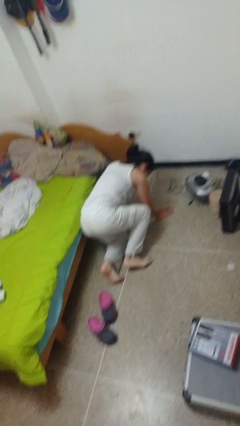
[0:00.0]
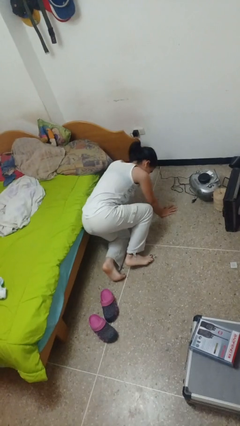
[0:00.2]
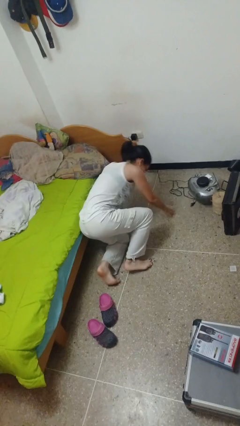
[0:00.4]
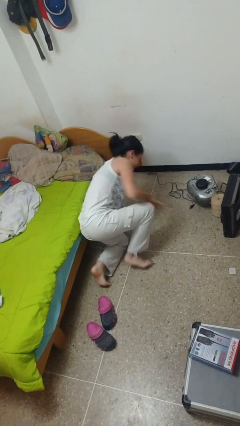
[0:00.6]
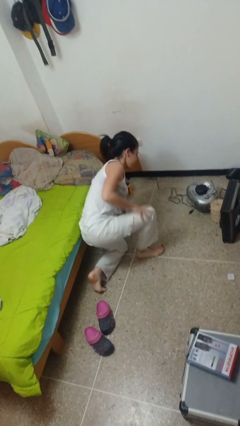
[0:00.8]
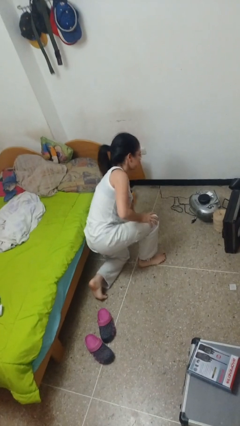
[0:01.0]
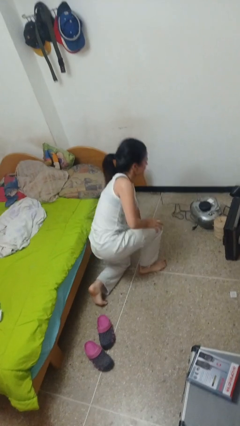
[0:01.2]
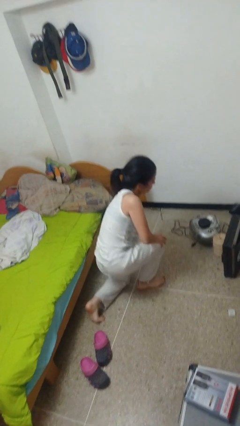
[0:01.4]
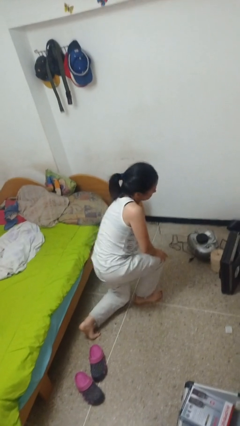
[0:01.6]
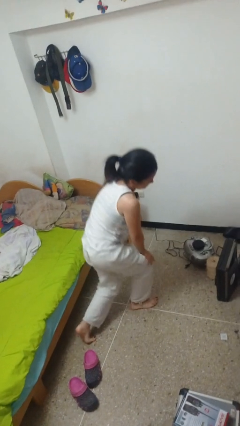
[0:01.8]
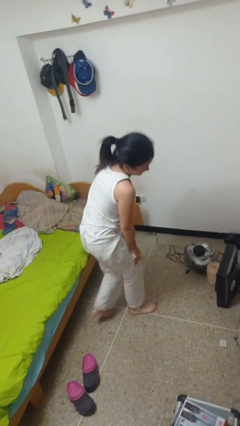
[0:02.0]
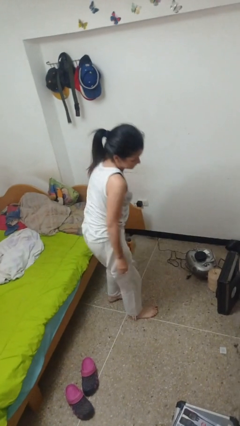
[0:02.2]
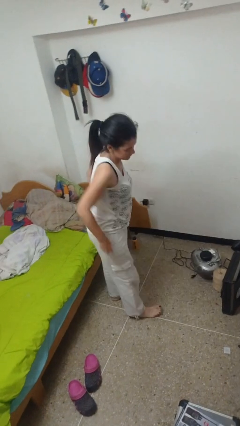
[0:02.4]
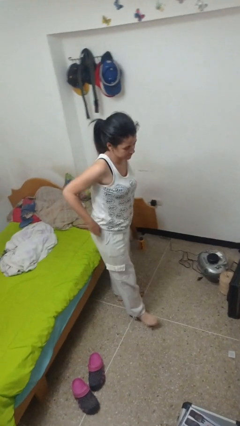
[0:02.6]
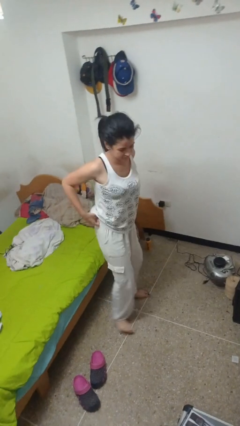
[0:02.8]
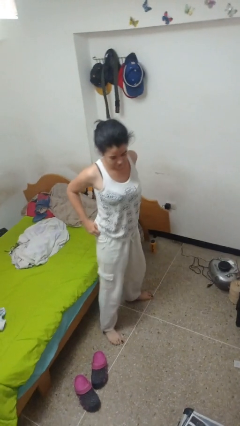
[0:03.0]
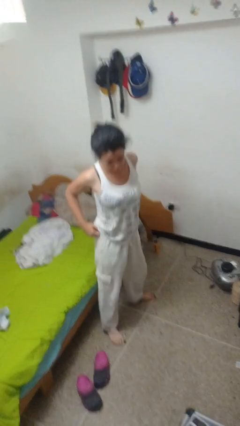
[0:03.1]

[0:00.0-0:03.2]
person stands up from floor

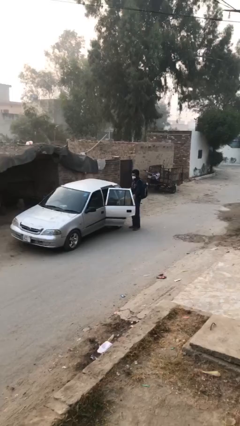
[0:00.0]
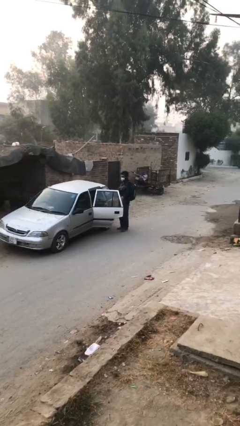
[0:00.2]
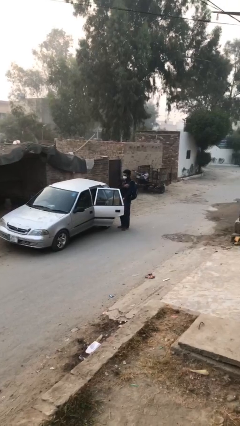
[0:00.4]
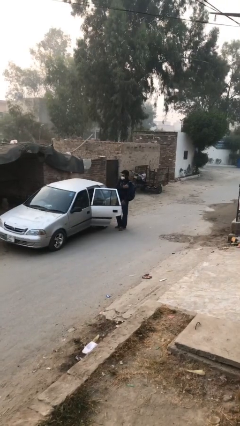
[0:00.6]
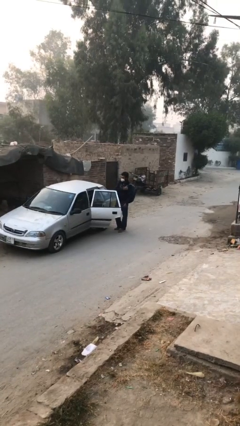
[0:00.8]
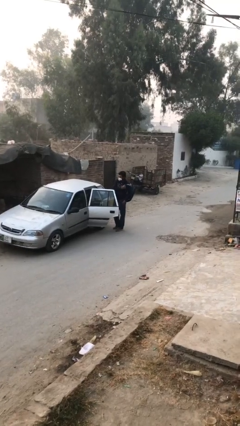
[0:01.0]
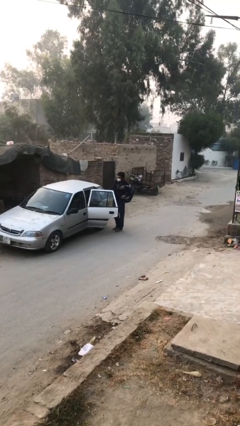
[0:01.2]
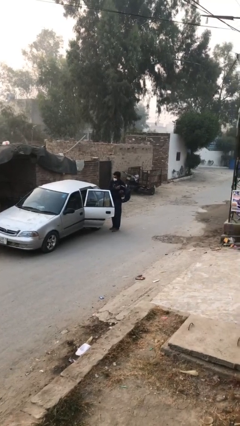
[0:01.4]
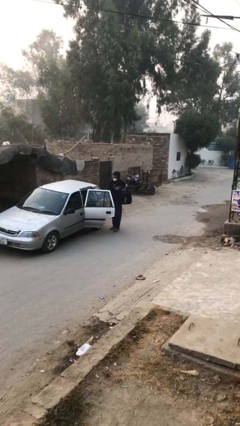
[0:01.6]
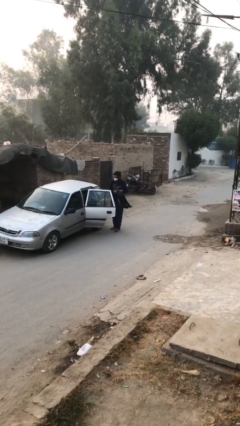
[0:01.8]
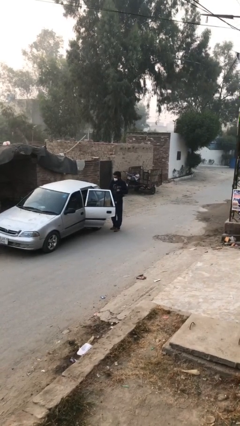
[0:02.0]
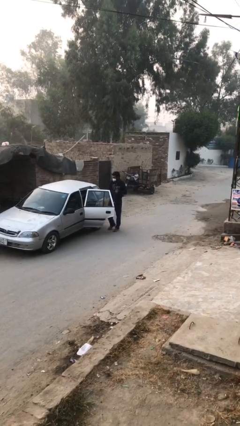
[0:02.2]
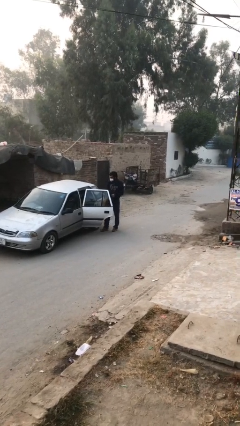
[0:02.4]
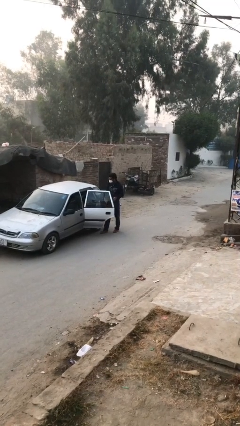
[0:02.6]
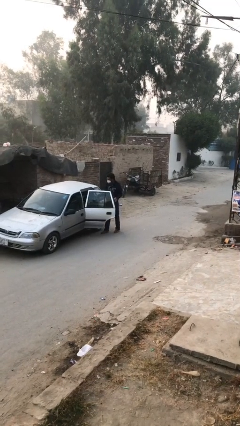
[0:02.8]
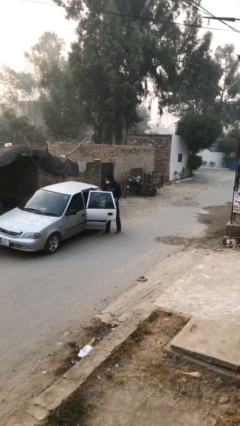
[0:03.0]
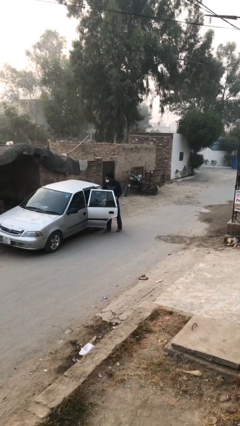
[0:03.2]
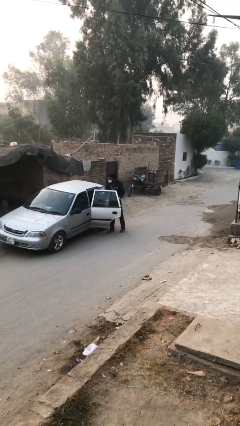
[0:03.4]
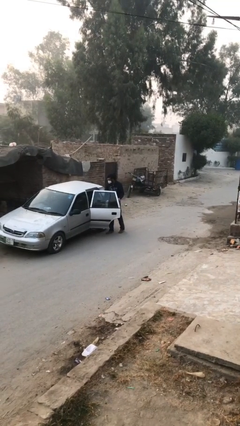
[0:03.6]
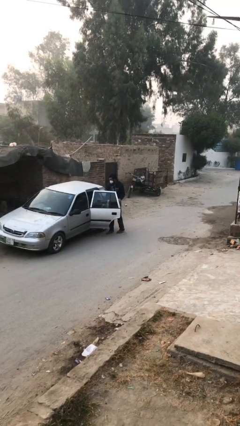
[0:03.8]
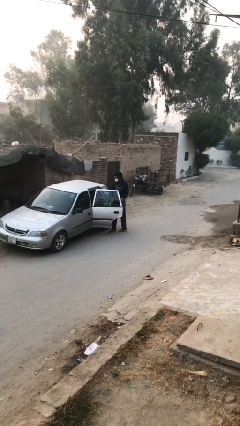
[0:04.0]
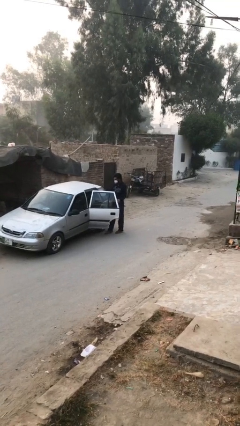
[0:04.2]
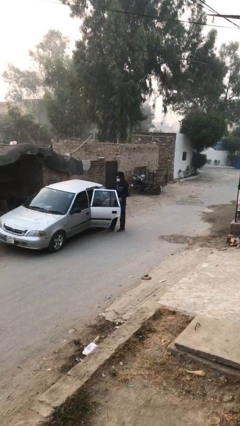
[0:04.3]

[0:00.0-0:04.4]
person loads car

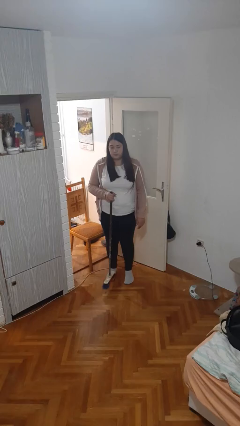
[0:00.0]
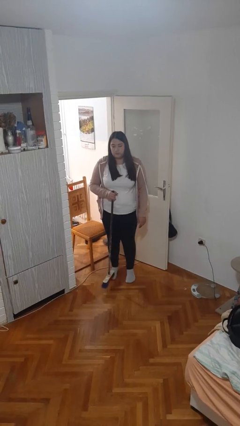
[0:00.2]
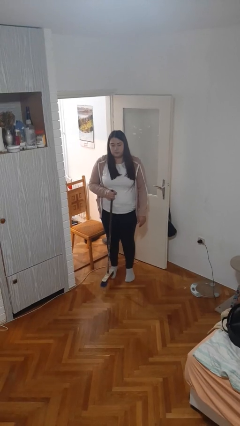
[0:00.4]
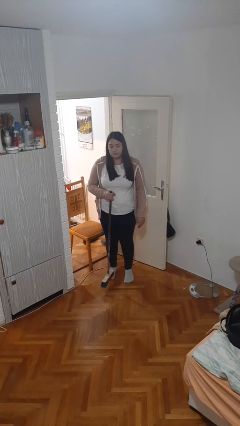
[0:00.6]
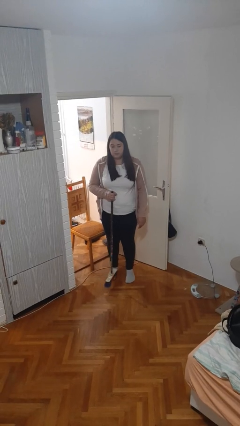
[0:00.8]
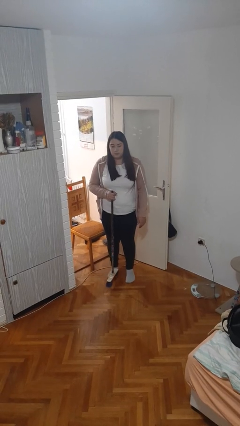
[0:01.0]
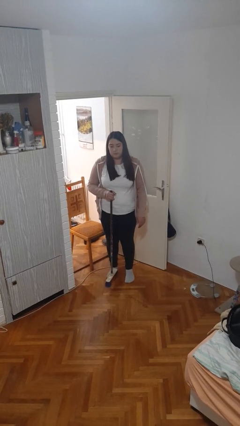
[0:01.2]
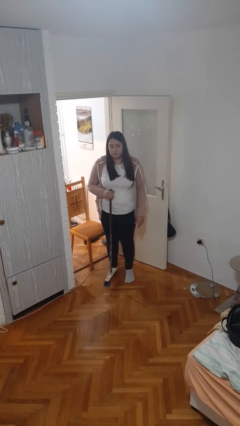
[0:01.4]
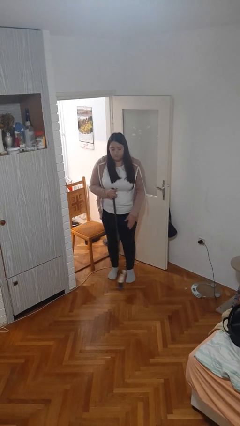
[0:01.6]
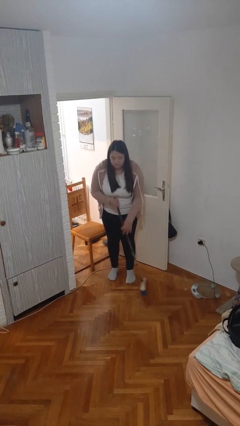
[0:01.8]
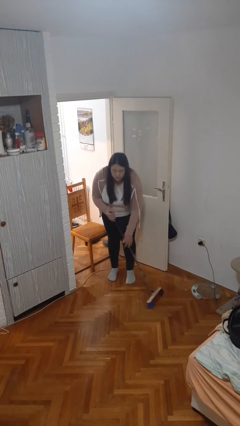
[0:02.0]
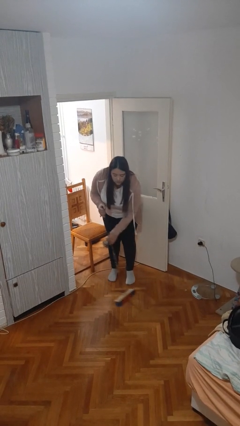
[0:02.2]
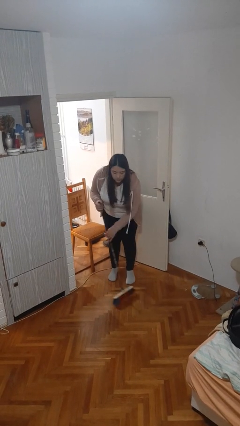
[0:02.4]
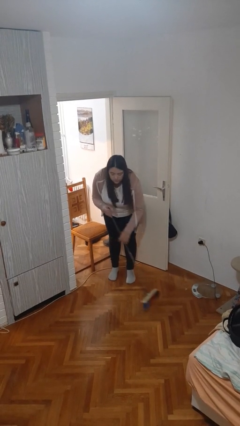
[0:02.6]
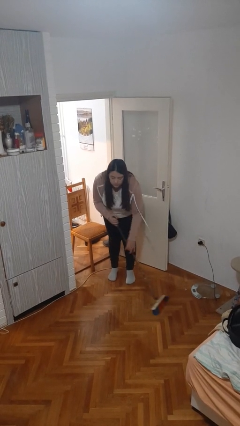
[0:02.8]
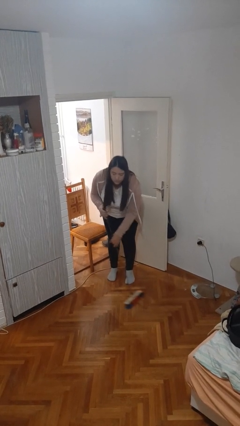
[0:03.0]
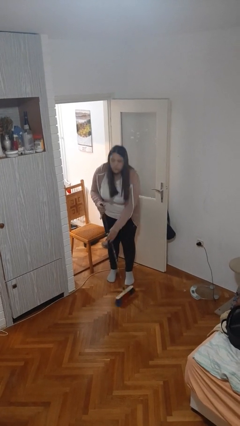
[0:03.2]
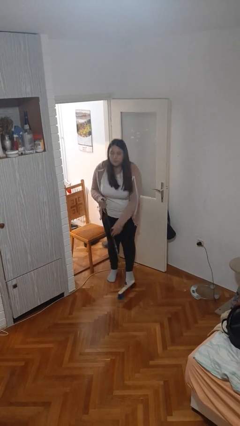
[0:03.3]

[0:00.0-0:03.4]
person sweeps floor

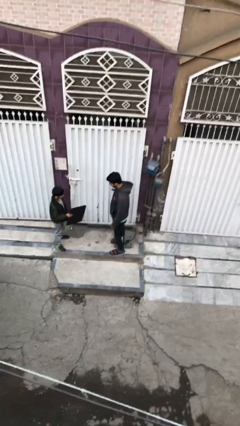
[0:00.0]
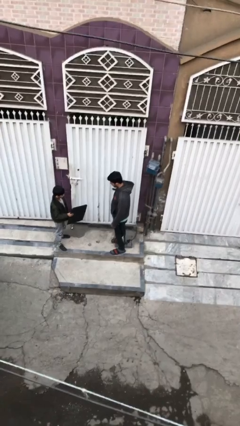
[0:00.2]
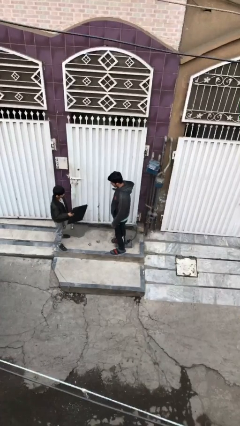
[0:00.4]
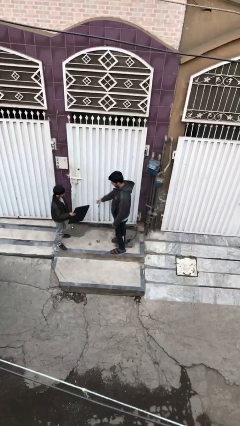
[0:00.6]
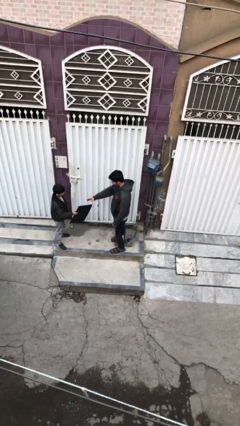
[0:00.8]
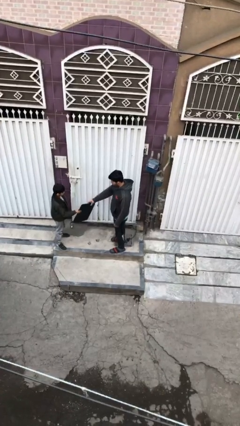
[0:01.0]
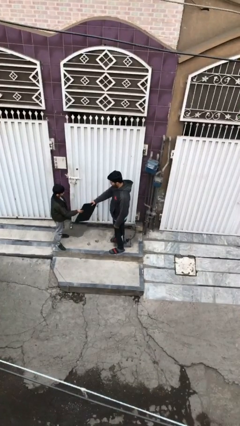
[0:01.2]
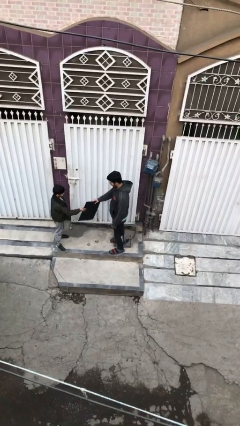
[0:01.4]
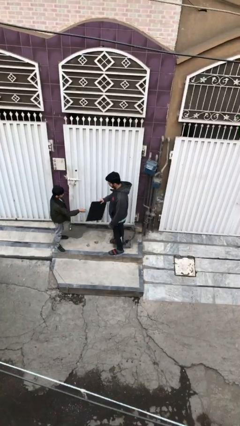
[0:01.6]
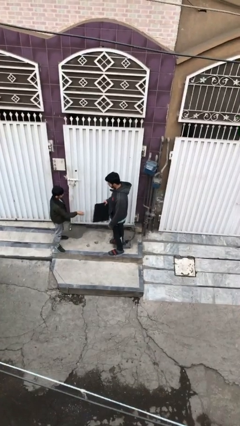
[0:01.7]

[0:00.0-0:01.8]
person transfers object to person

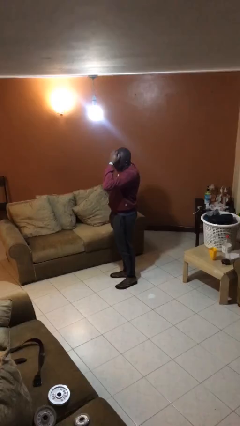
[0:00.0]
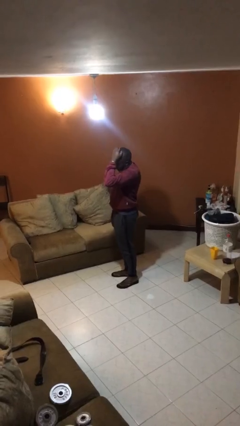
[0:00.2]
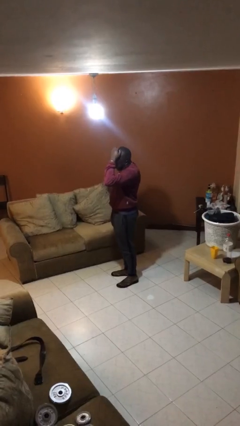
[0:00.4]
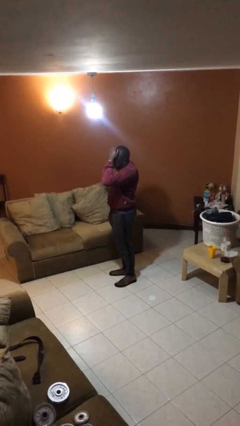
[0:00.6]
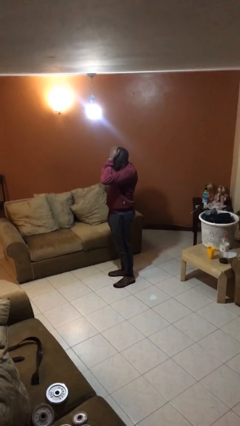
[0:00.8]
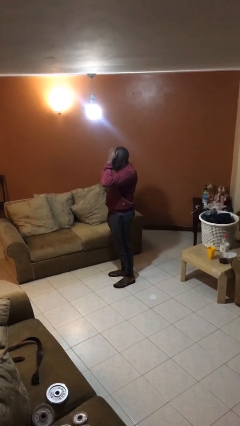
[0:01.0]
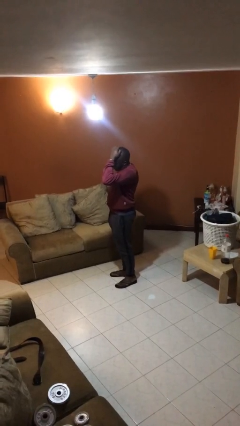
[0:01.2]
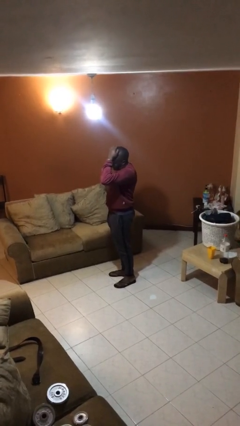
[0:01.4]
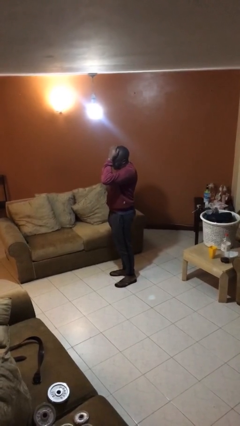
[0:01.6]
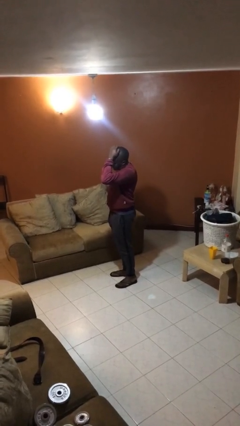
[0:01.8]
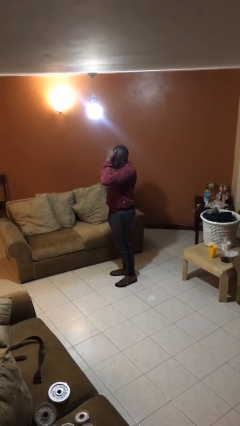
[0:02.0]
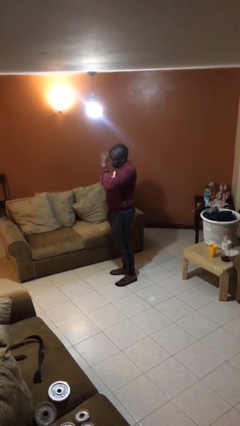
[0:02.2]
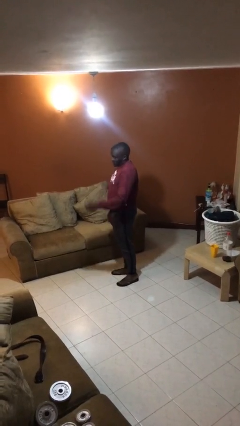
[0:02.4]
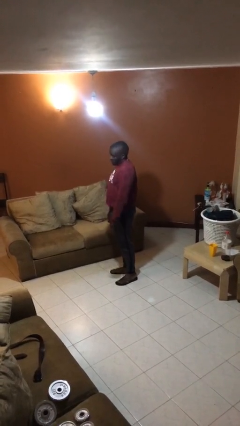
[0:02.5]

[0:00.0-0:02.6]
person scratches face

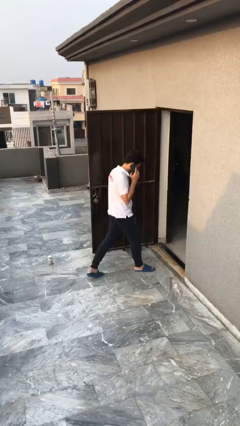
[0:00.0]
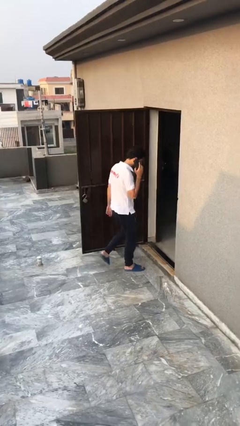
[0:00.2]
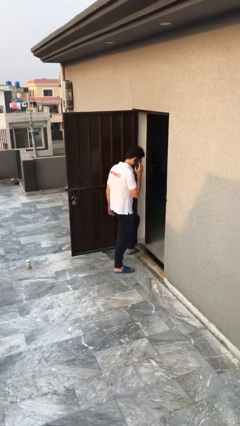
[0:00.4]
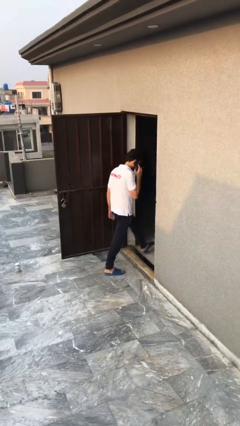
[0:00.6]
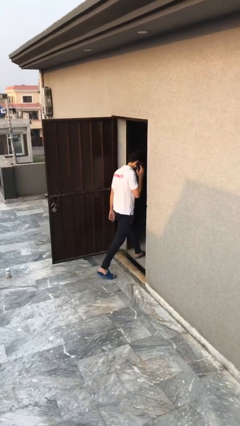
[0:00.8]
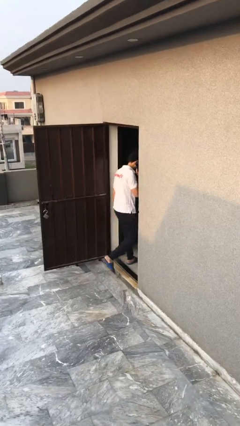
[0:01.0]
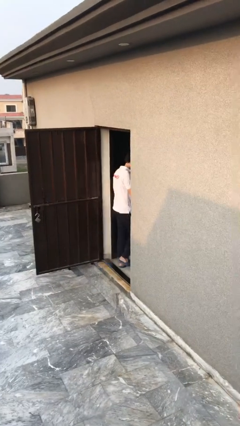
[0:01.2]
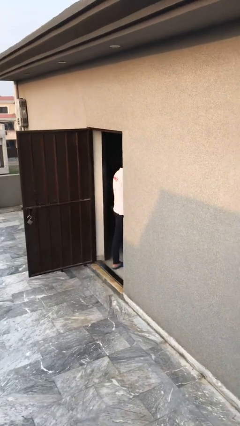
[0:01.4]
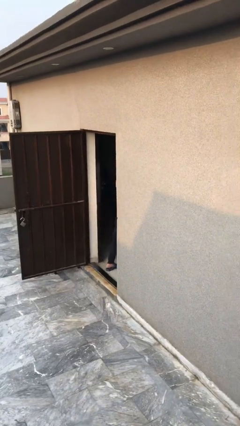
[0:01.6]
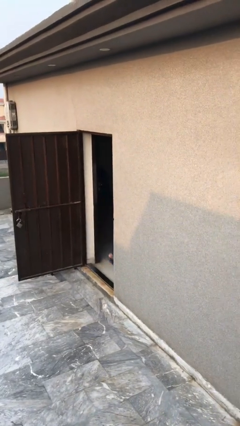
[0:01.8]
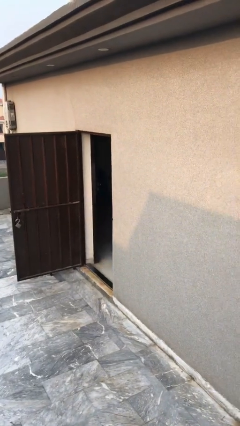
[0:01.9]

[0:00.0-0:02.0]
person exits scene through structure
